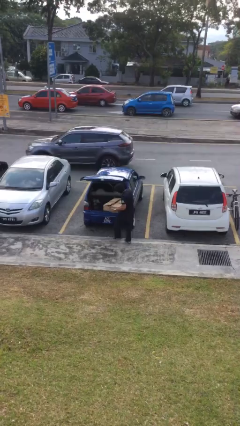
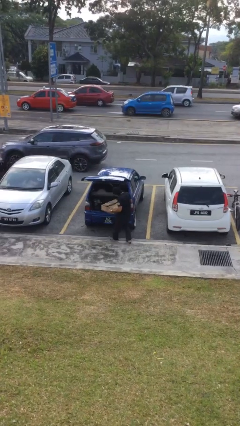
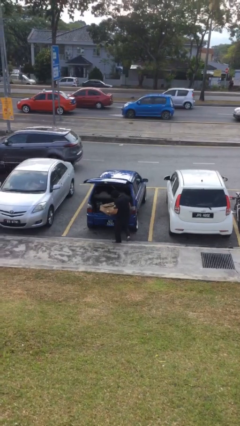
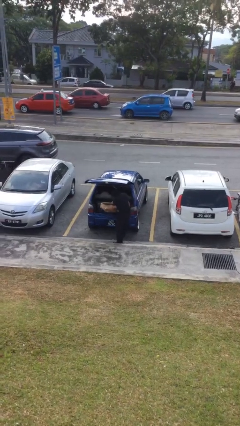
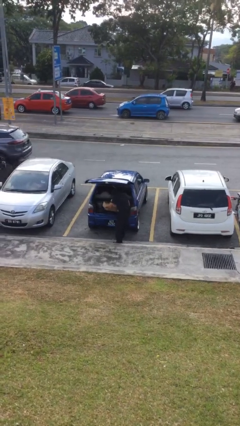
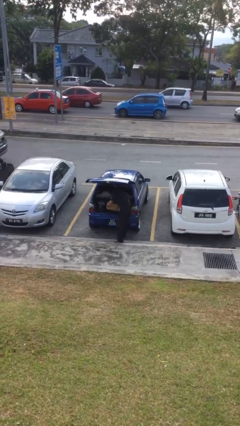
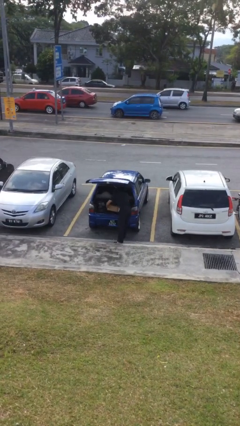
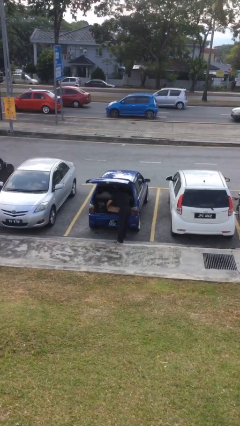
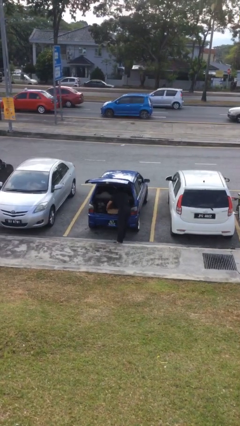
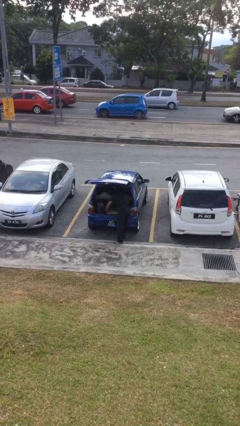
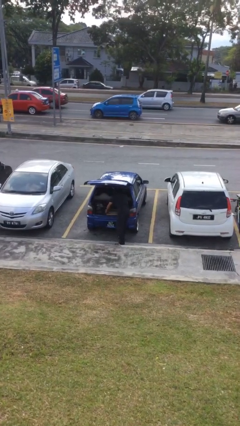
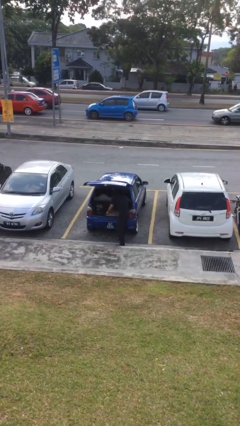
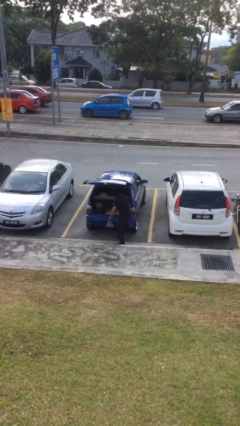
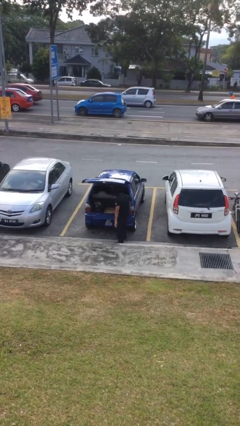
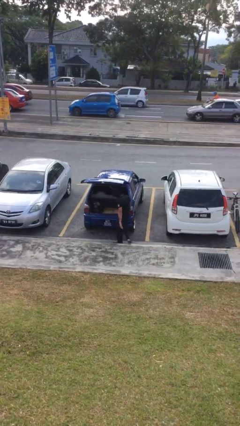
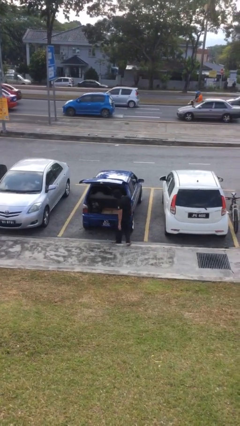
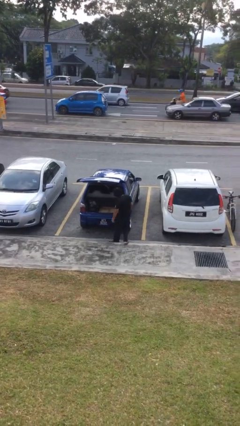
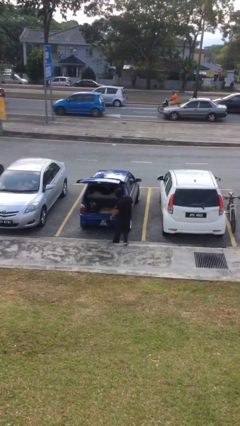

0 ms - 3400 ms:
person loads car

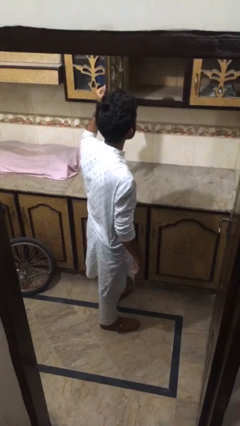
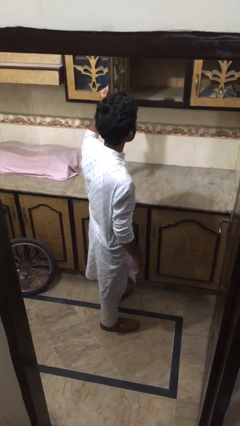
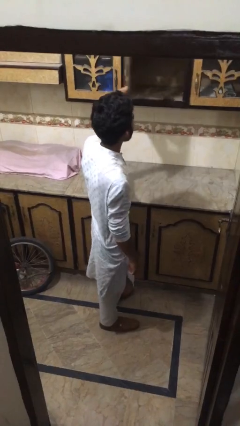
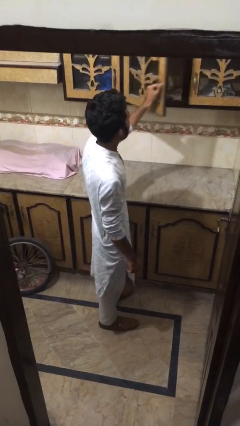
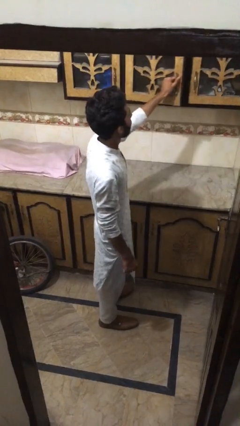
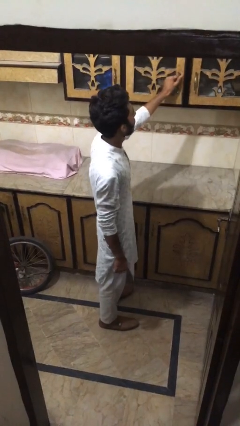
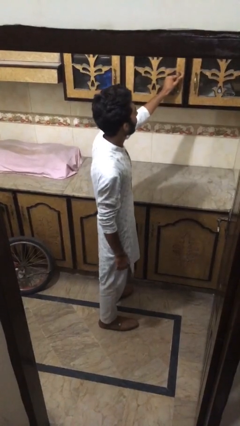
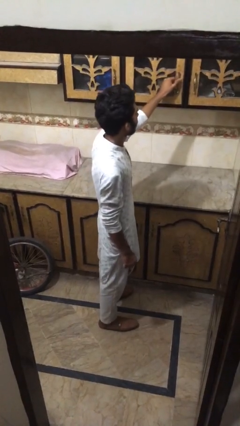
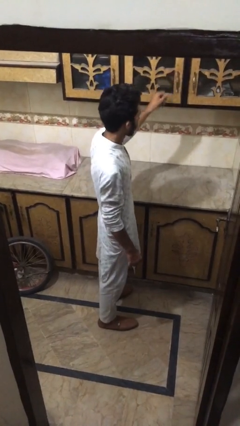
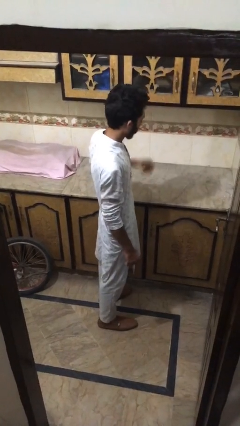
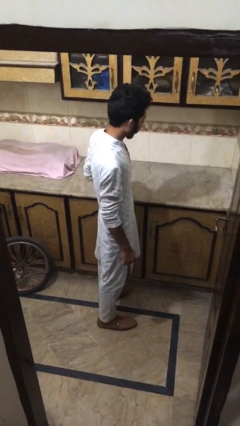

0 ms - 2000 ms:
person closes cabinet

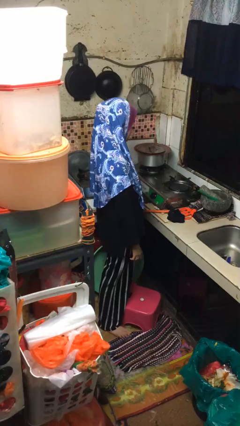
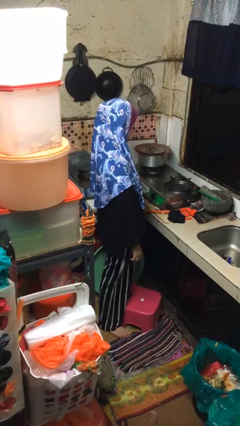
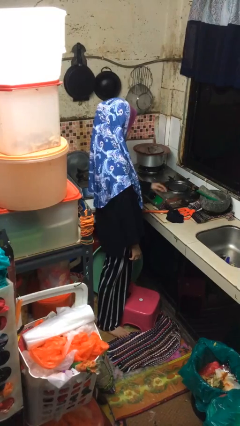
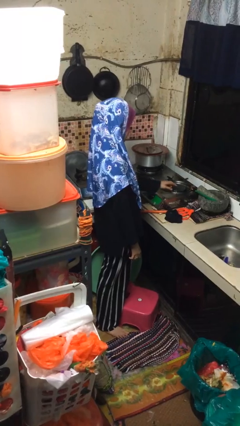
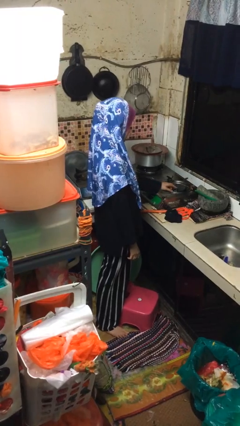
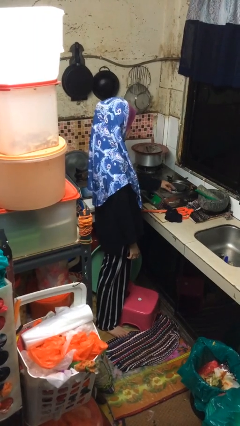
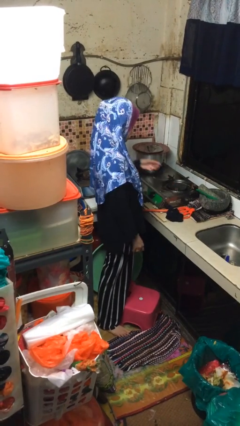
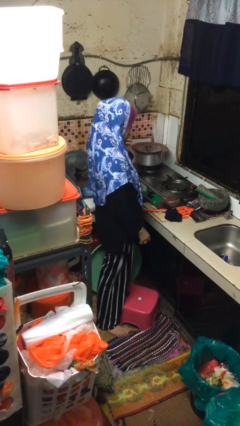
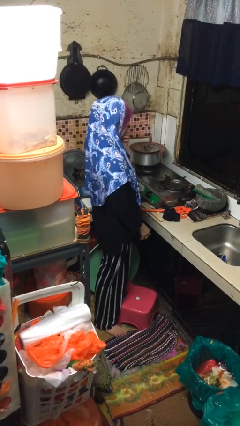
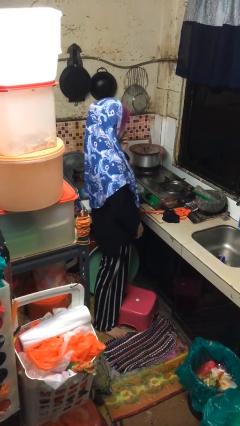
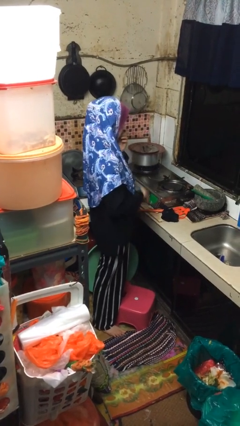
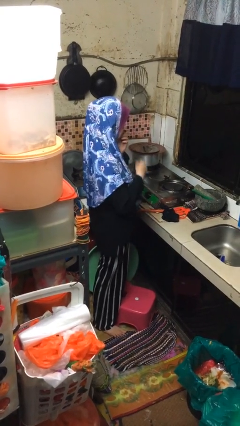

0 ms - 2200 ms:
person burns hand

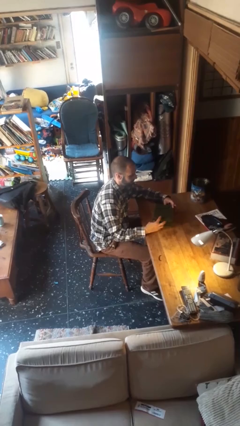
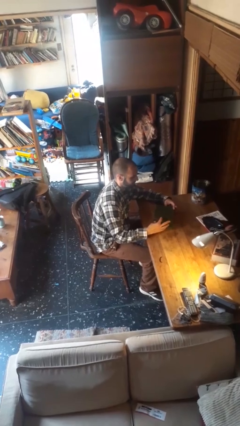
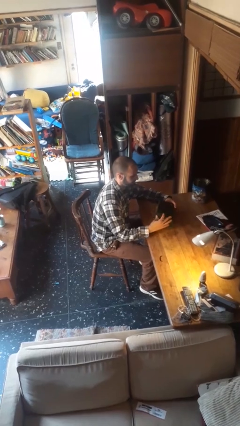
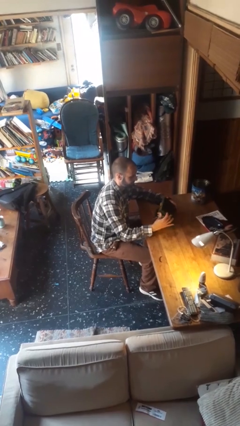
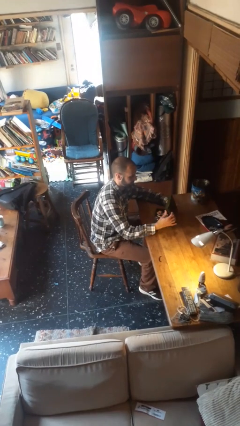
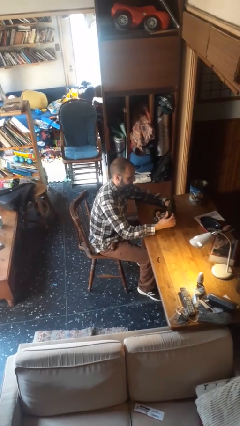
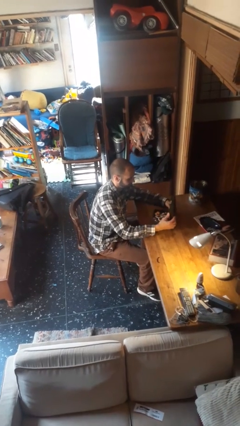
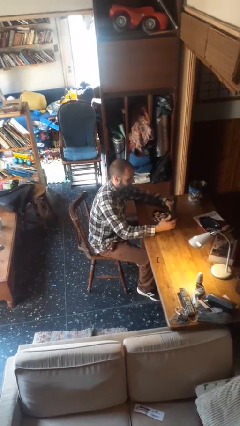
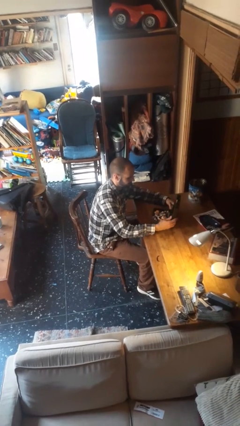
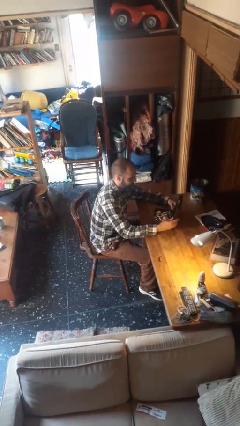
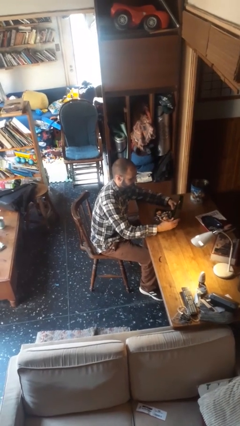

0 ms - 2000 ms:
person opens jewelry box

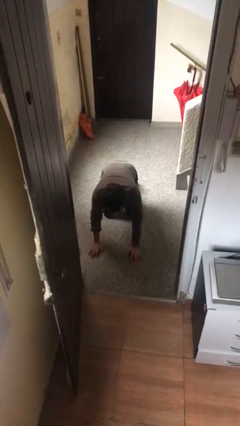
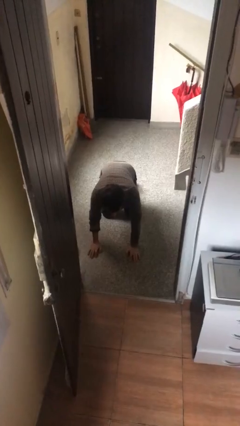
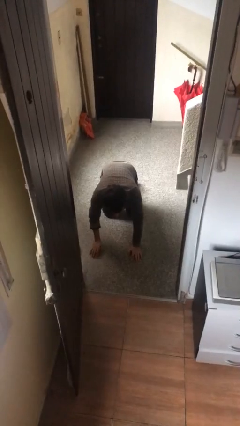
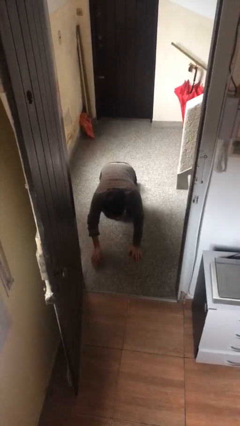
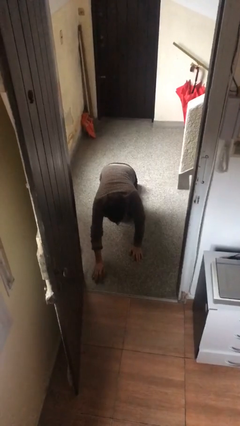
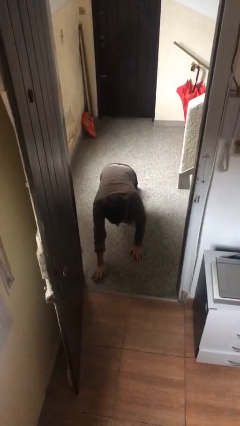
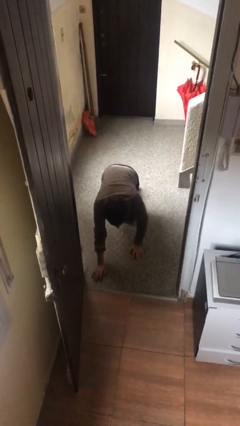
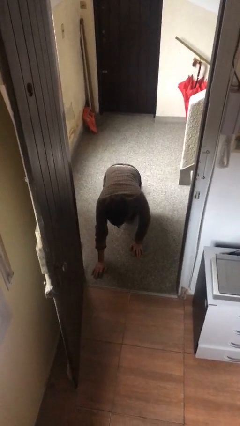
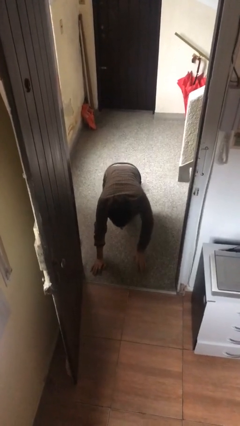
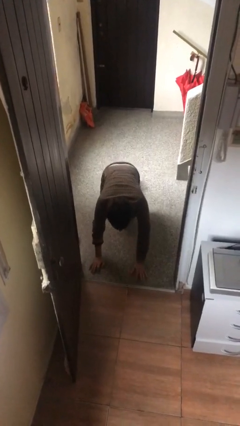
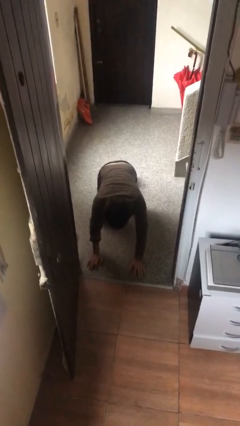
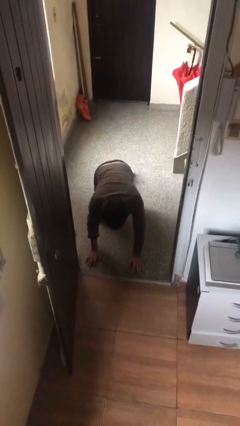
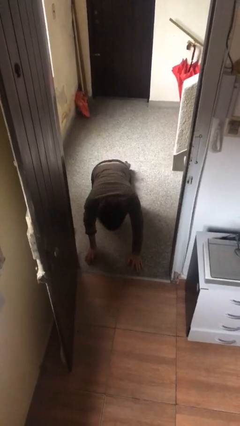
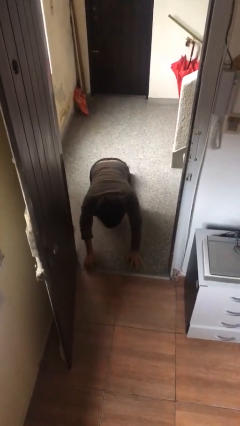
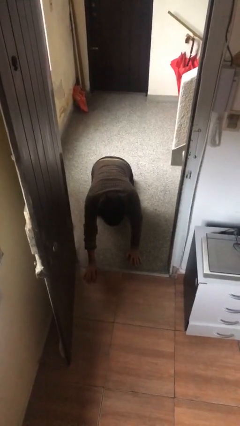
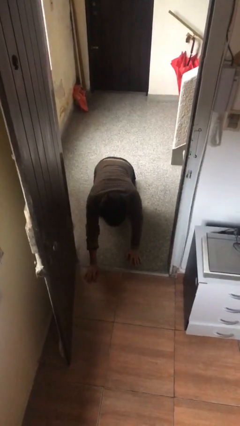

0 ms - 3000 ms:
person crawls

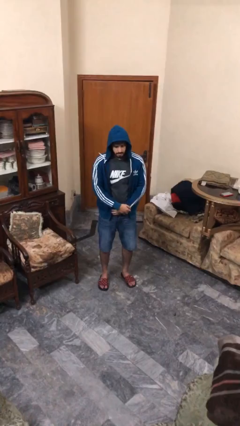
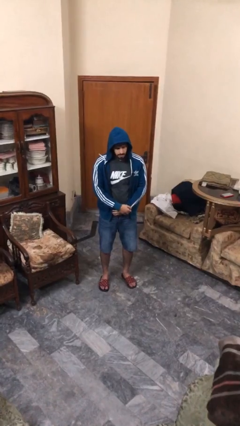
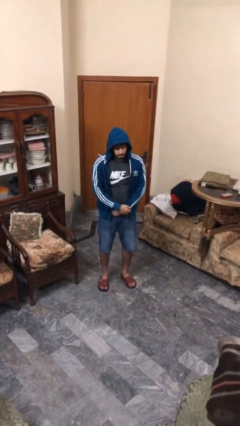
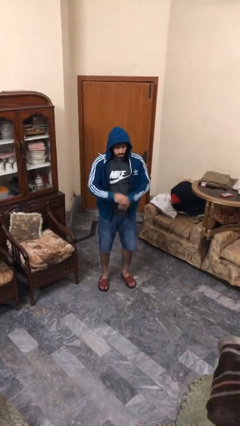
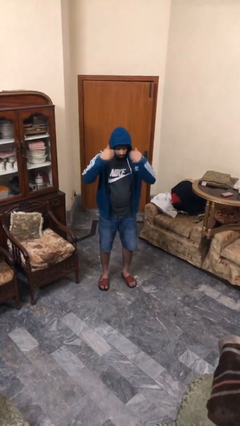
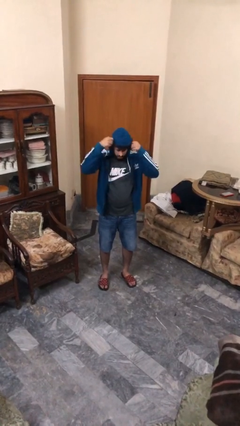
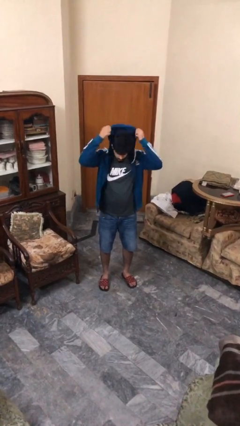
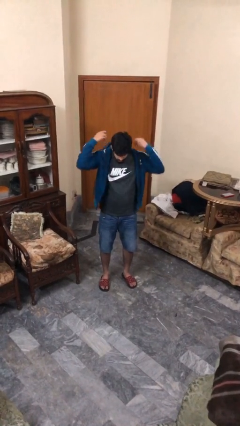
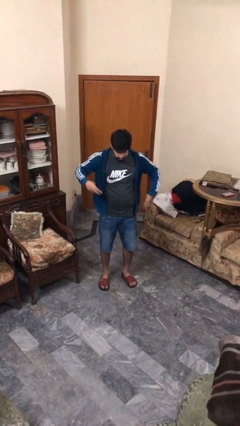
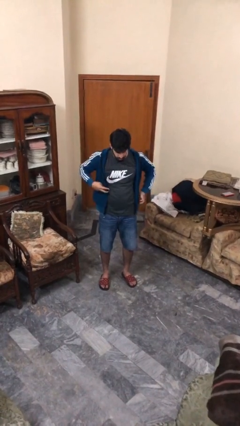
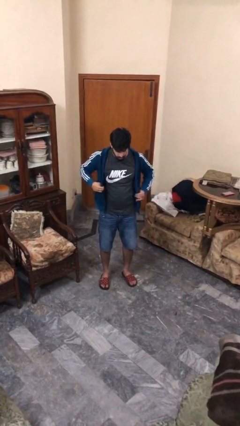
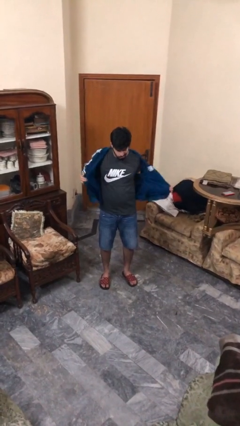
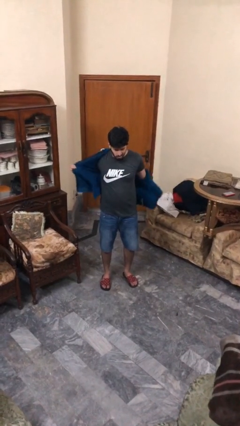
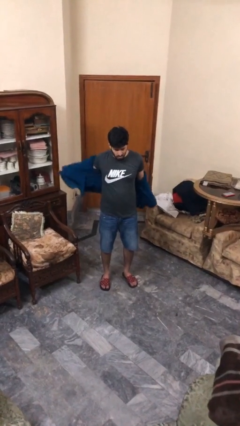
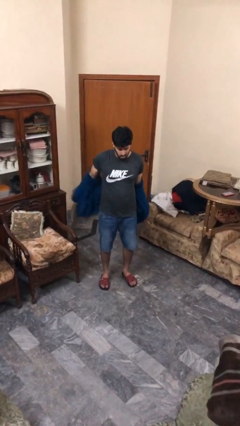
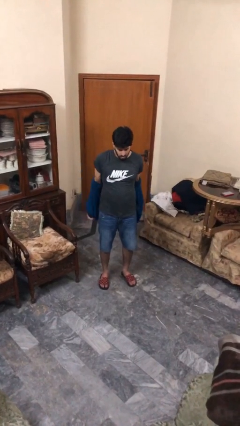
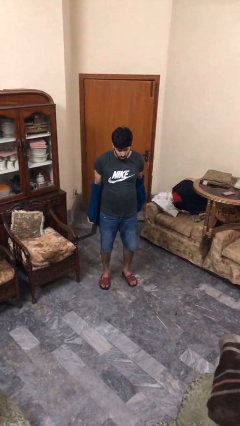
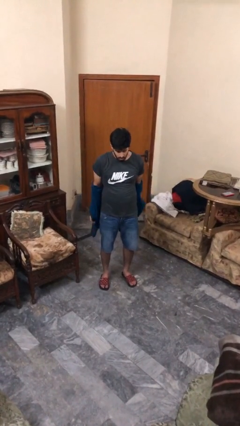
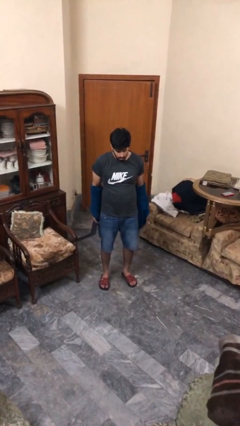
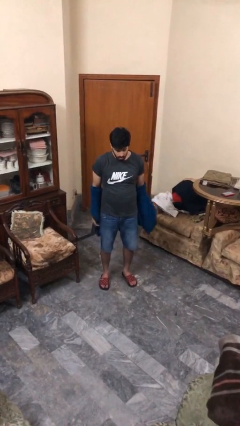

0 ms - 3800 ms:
person takes off hoodie

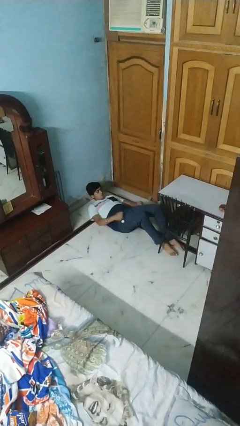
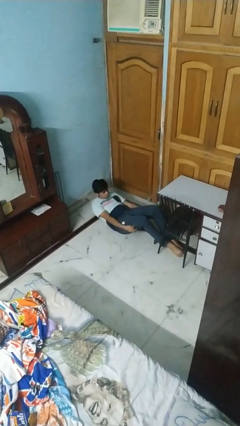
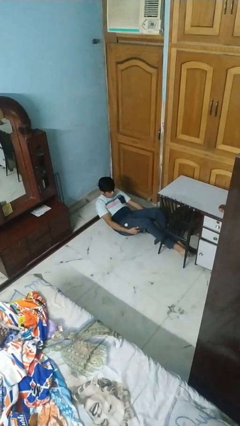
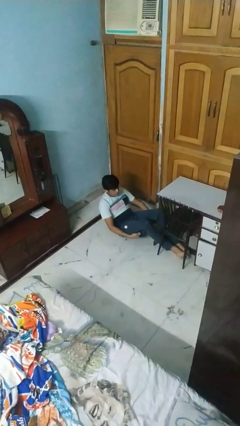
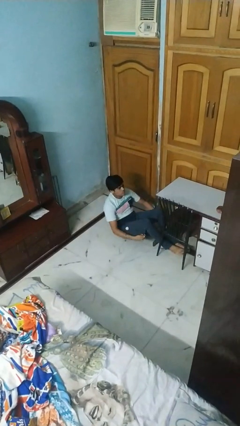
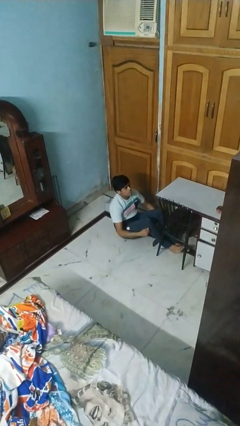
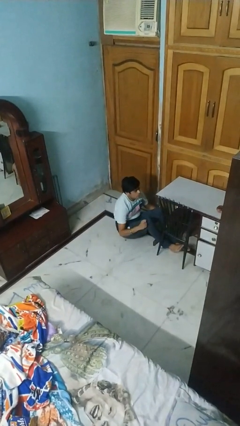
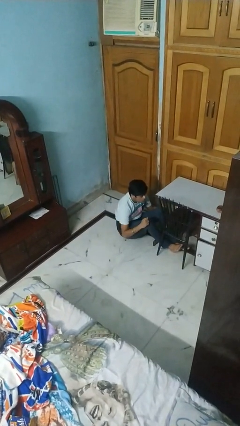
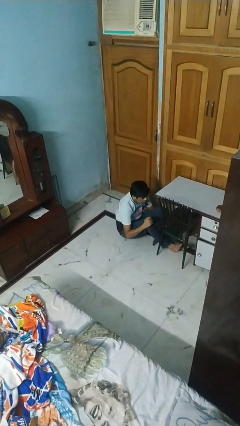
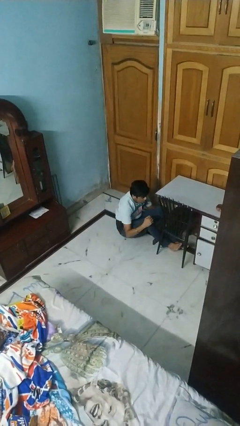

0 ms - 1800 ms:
person exercises with situp
